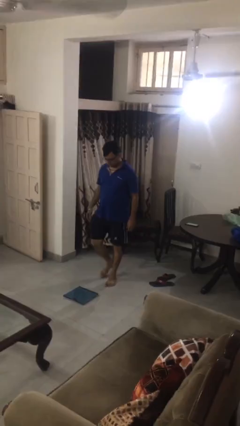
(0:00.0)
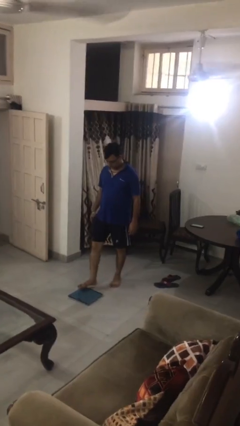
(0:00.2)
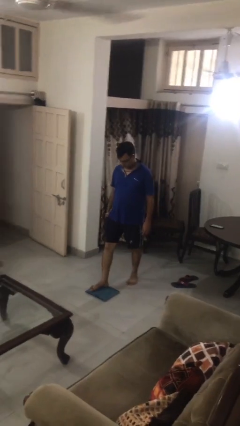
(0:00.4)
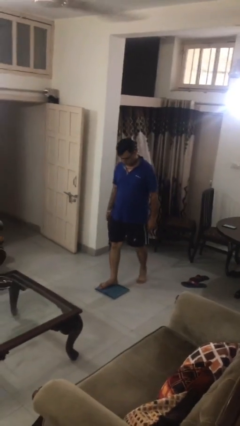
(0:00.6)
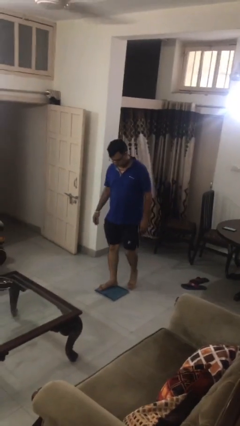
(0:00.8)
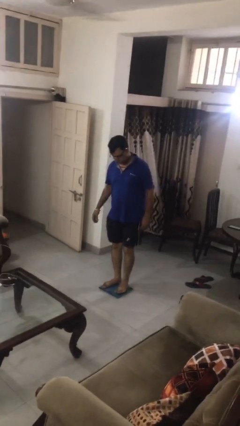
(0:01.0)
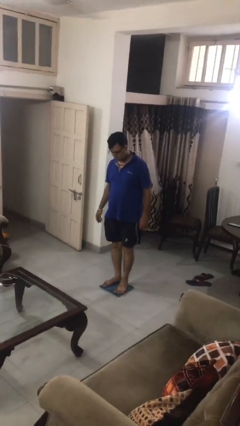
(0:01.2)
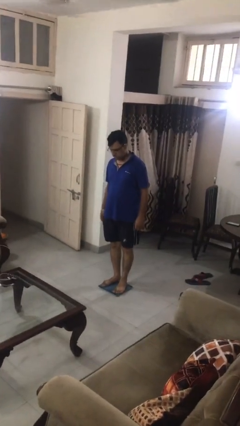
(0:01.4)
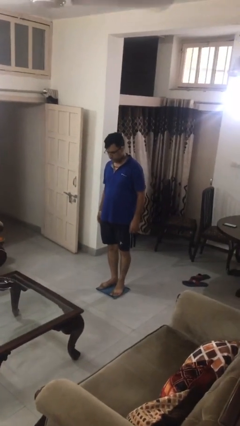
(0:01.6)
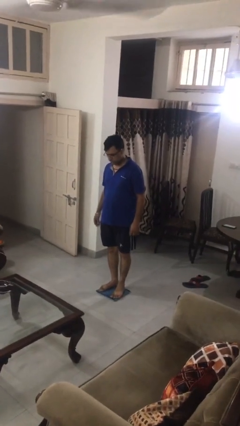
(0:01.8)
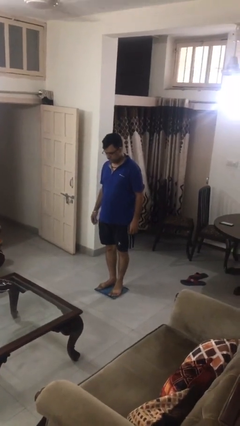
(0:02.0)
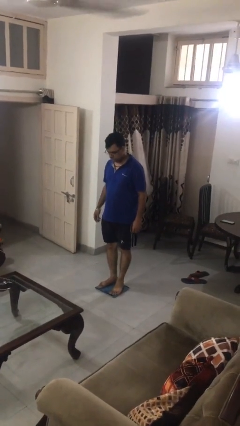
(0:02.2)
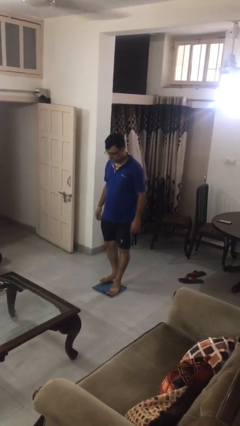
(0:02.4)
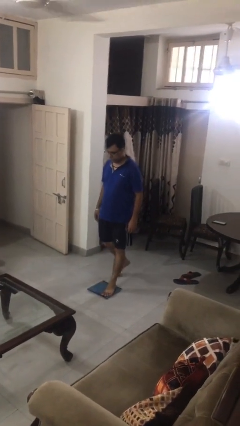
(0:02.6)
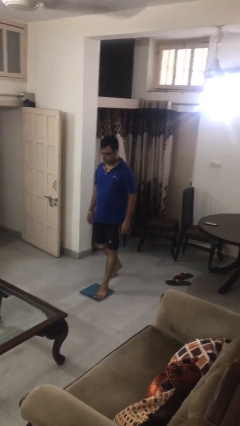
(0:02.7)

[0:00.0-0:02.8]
person uses bodyweight scale

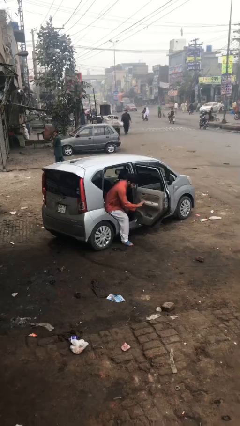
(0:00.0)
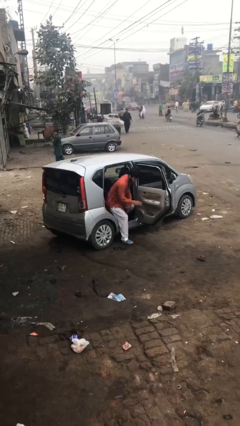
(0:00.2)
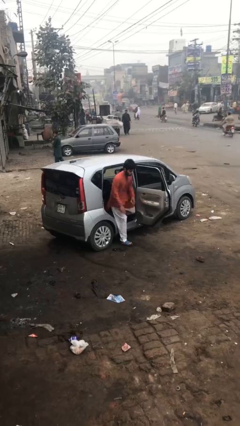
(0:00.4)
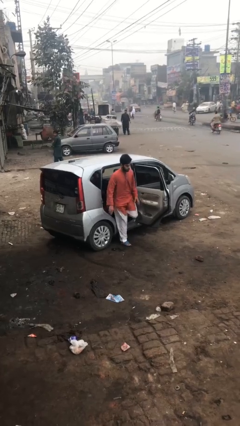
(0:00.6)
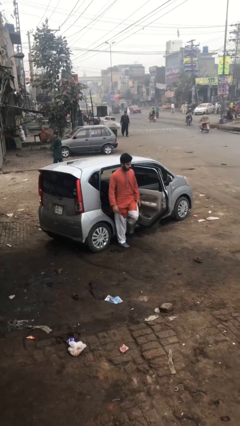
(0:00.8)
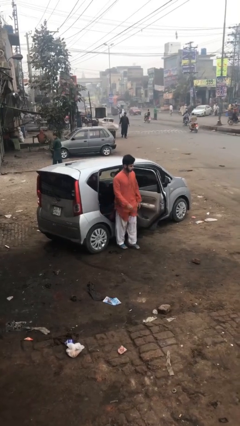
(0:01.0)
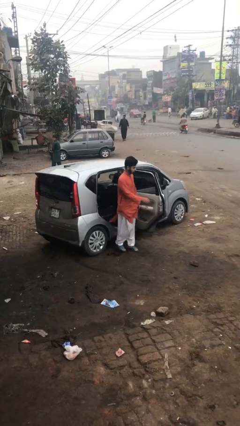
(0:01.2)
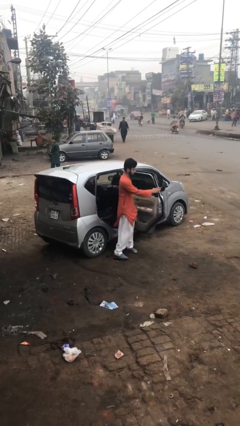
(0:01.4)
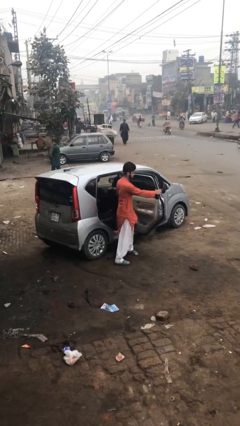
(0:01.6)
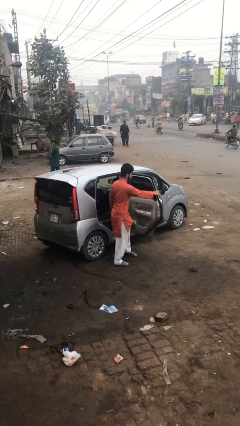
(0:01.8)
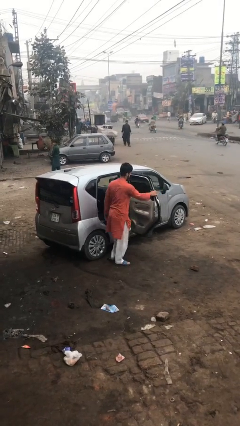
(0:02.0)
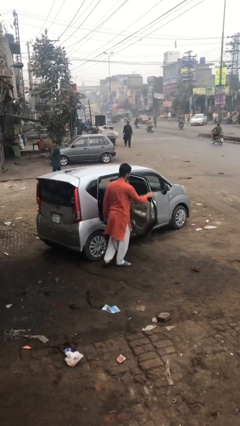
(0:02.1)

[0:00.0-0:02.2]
person exits car

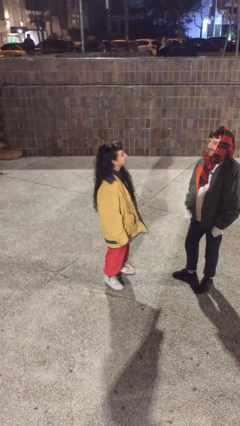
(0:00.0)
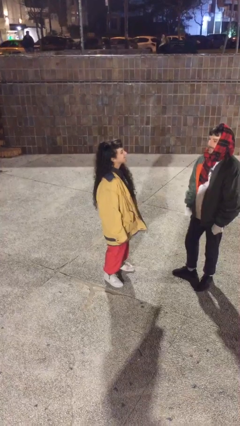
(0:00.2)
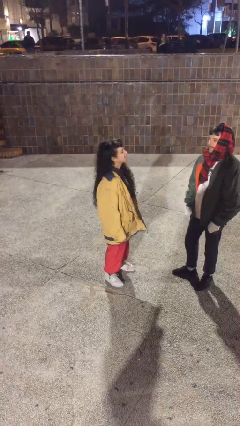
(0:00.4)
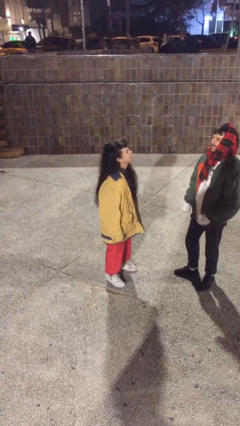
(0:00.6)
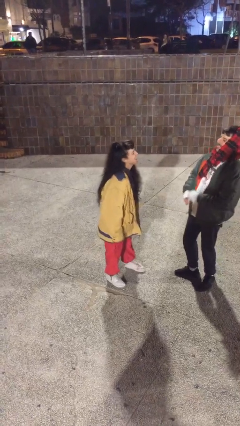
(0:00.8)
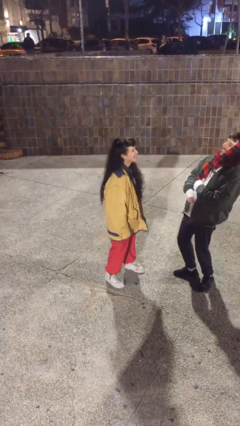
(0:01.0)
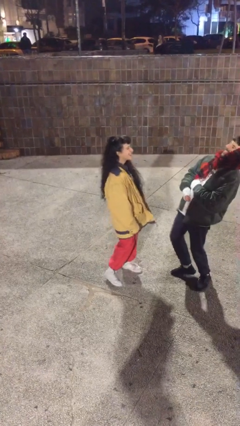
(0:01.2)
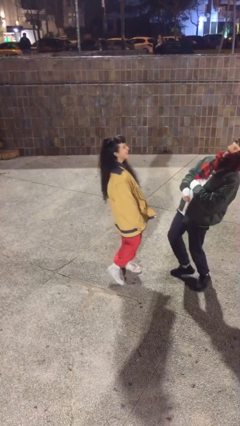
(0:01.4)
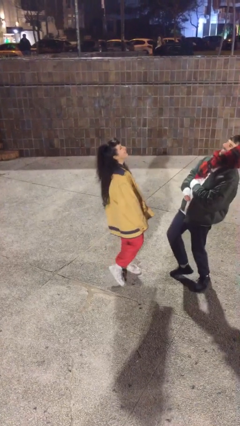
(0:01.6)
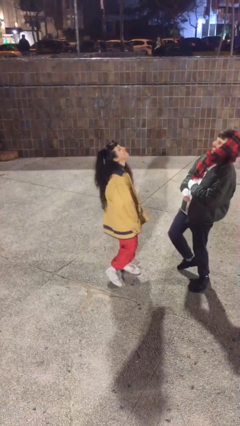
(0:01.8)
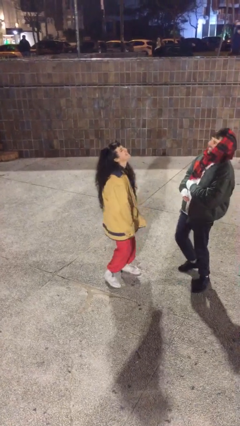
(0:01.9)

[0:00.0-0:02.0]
person laughs with person

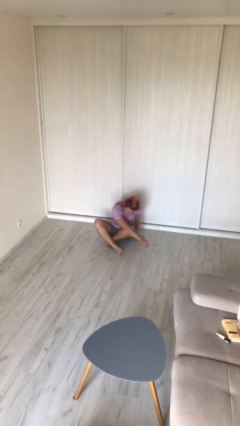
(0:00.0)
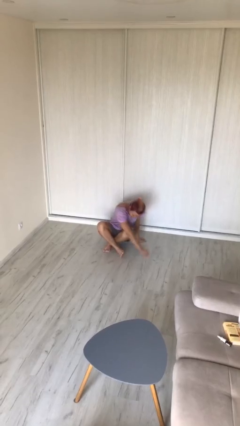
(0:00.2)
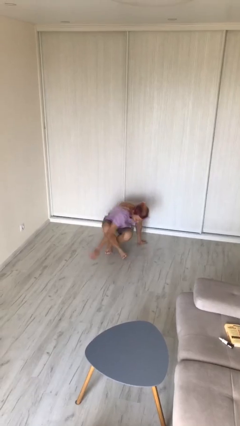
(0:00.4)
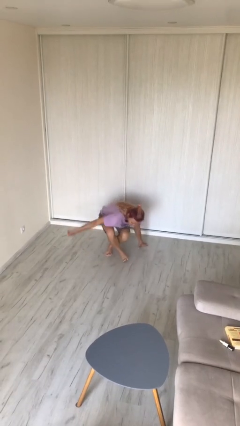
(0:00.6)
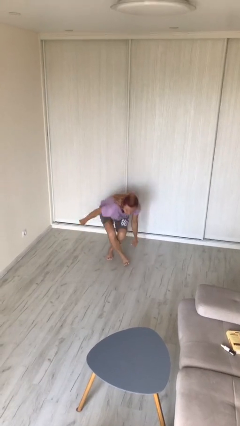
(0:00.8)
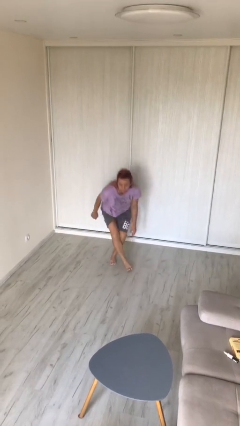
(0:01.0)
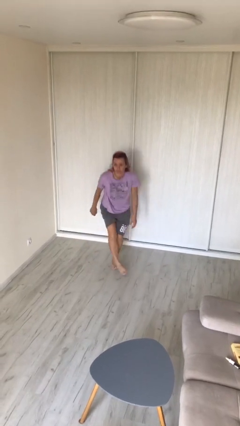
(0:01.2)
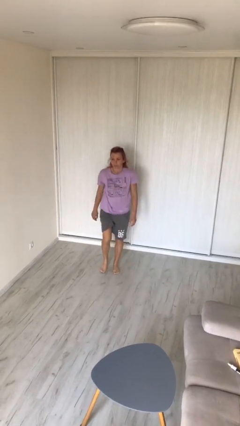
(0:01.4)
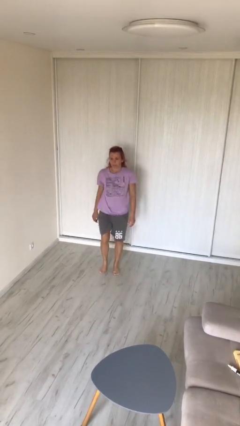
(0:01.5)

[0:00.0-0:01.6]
person stands up from floor

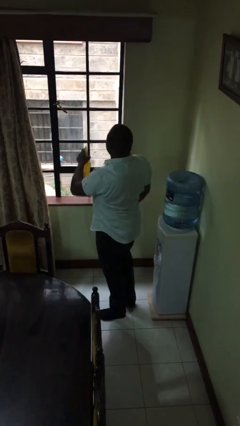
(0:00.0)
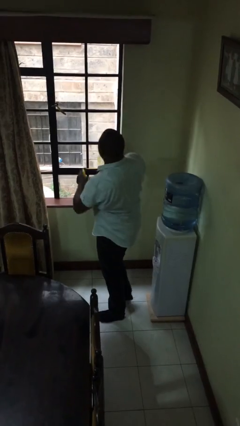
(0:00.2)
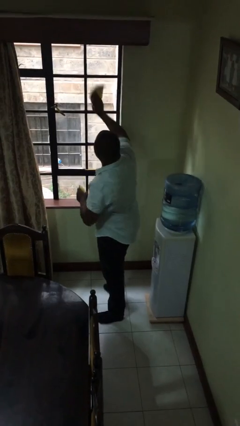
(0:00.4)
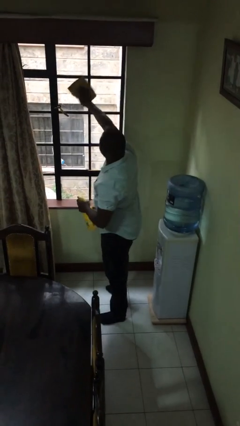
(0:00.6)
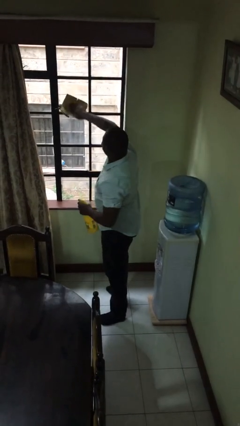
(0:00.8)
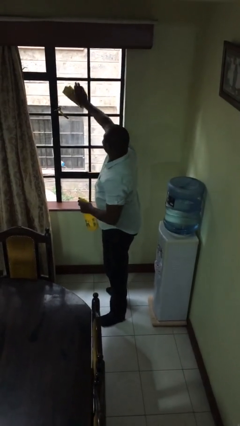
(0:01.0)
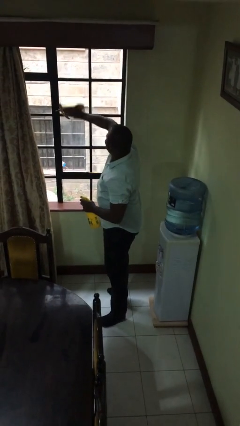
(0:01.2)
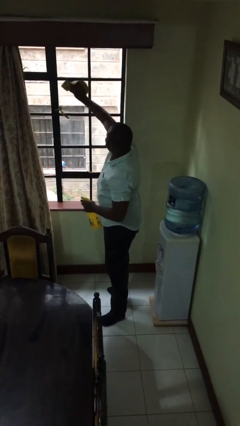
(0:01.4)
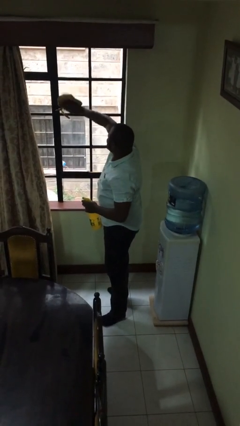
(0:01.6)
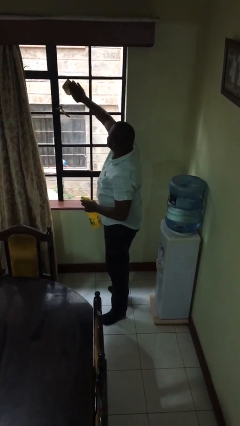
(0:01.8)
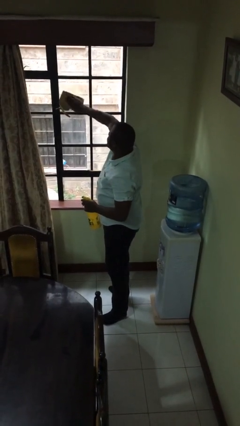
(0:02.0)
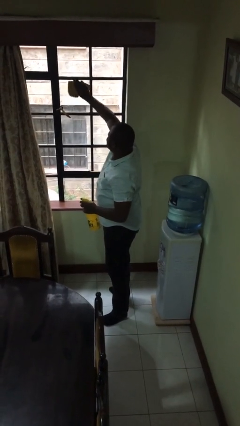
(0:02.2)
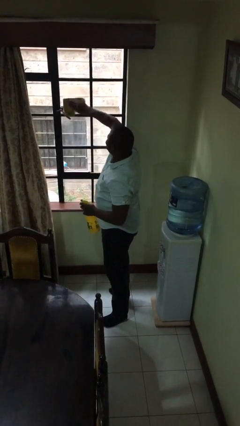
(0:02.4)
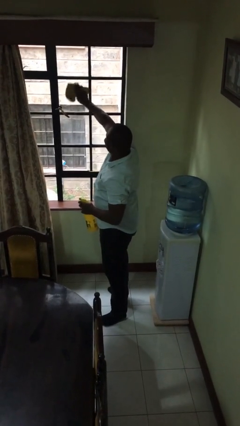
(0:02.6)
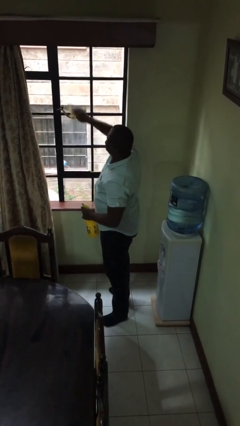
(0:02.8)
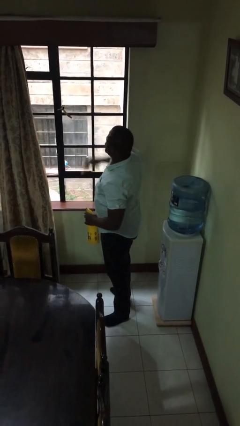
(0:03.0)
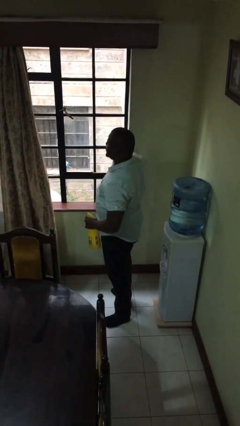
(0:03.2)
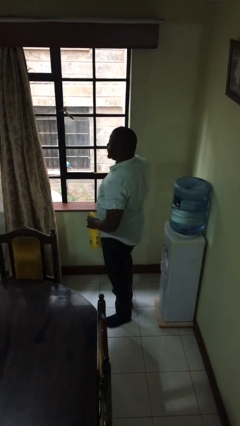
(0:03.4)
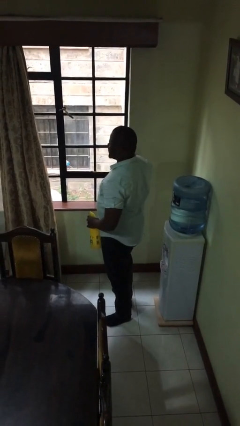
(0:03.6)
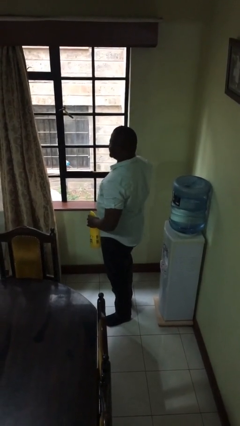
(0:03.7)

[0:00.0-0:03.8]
person washes window

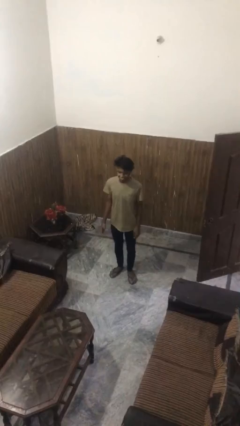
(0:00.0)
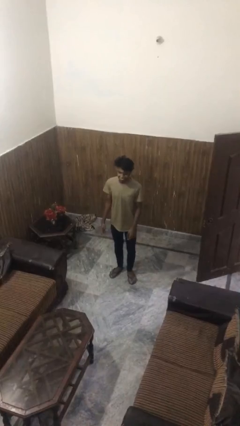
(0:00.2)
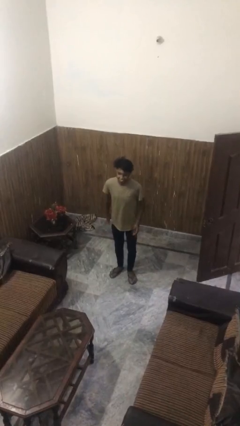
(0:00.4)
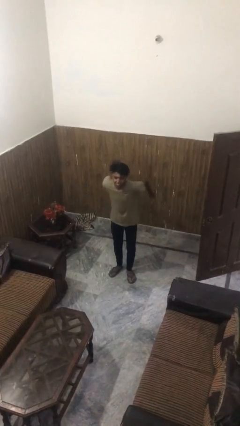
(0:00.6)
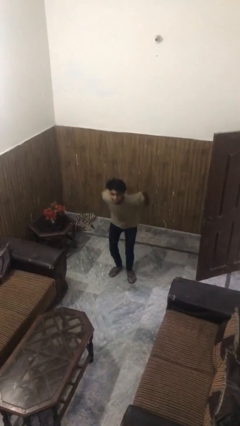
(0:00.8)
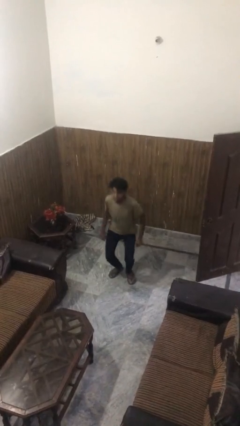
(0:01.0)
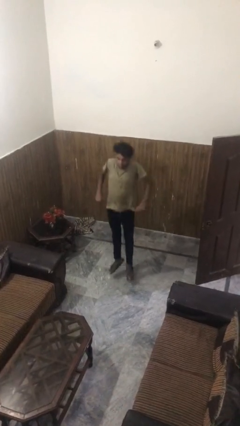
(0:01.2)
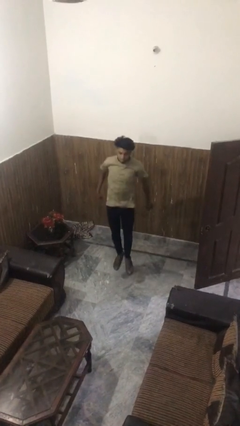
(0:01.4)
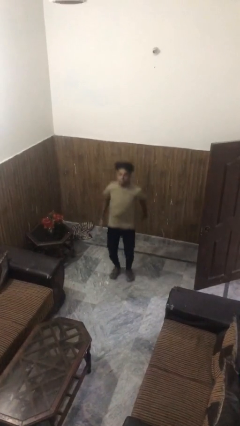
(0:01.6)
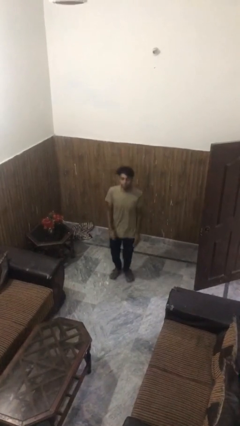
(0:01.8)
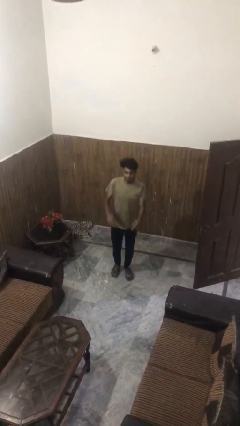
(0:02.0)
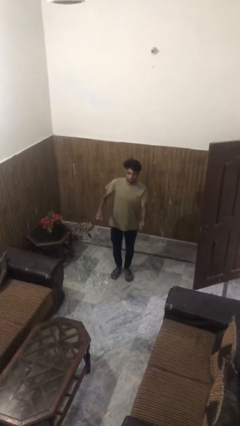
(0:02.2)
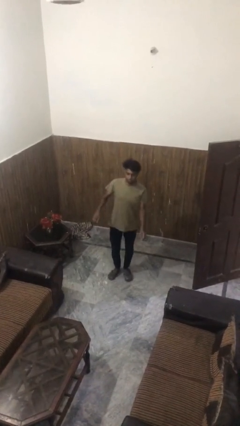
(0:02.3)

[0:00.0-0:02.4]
person jumps

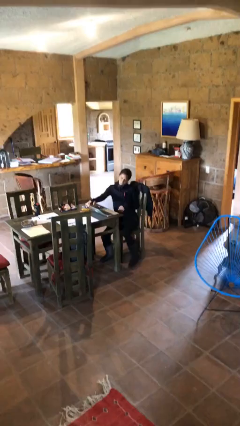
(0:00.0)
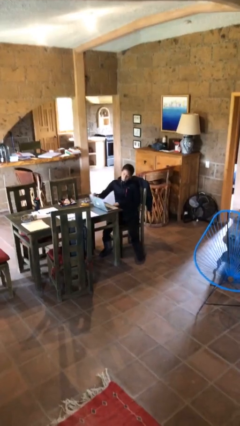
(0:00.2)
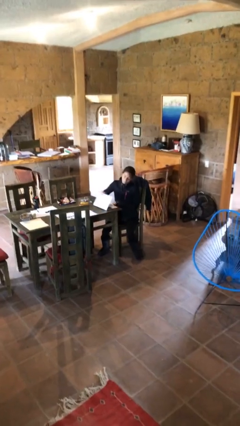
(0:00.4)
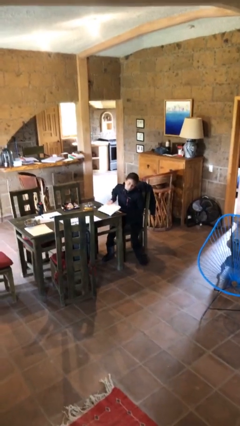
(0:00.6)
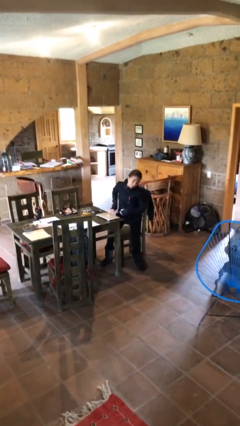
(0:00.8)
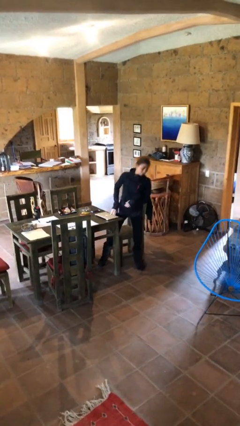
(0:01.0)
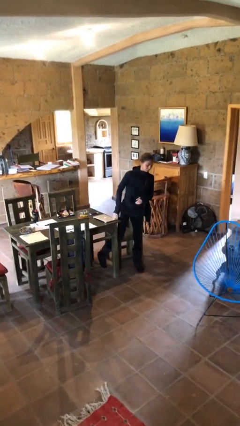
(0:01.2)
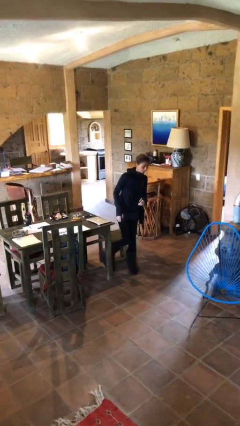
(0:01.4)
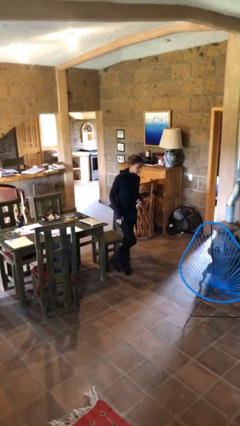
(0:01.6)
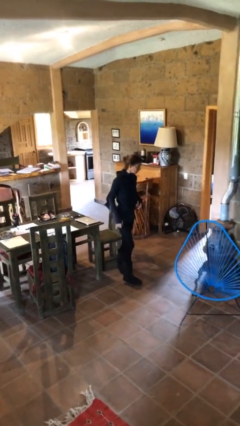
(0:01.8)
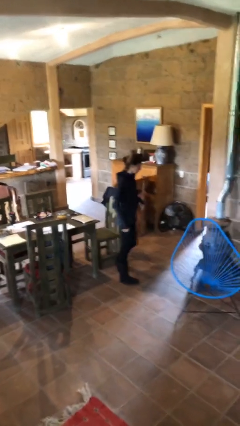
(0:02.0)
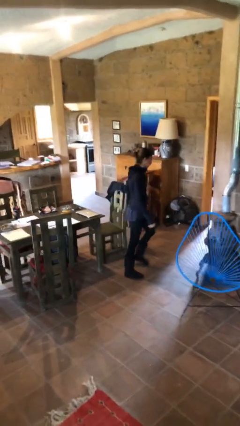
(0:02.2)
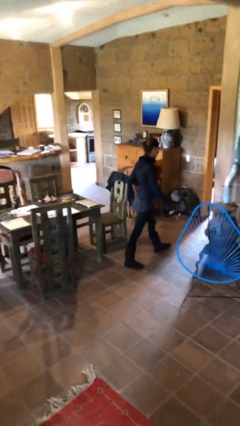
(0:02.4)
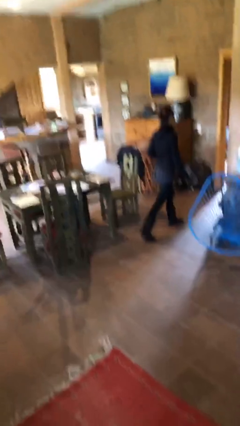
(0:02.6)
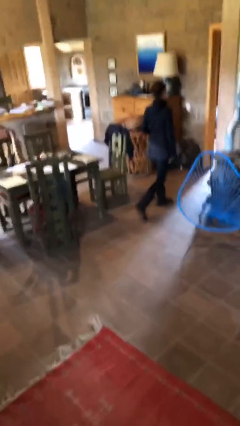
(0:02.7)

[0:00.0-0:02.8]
person stands up
